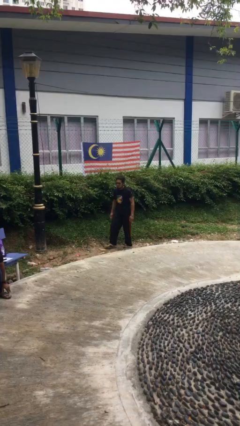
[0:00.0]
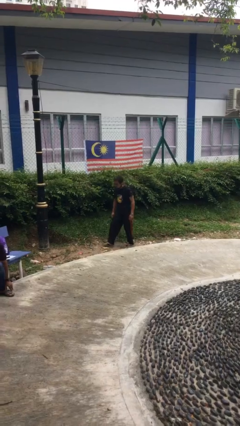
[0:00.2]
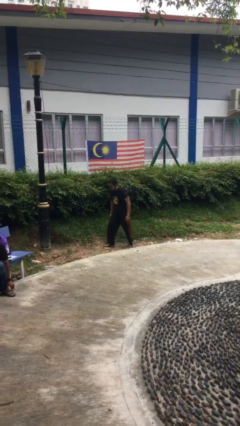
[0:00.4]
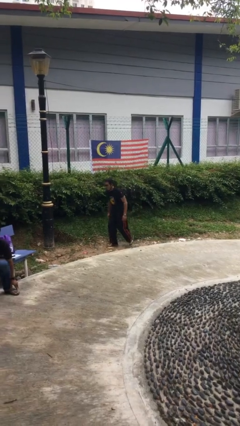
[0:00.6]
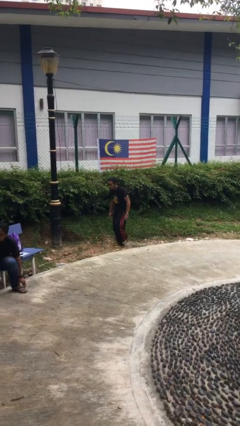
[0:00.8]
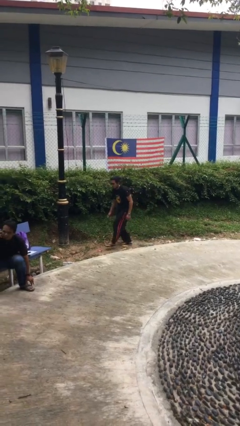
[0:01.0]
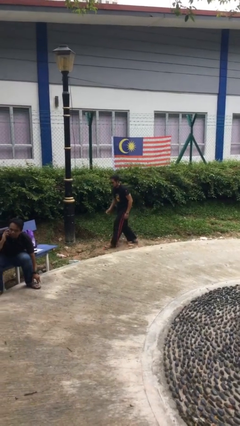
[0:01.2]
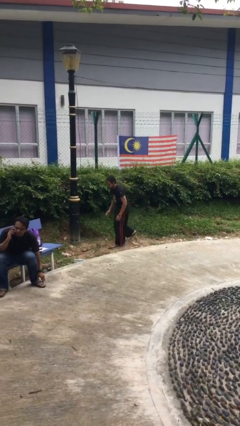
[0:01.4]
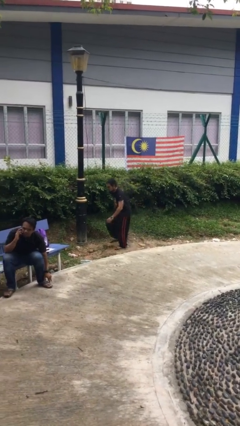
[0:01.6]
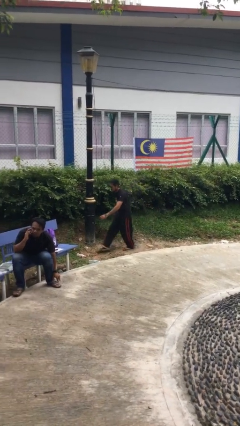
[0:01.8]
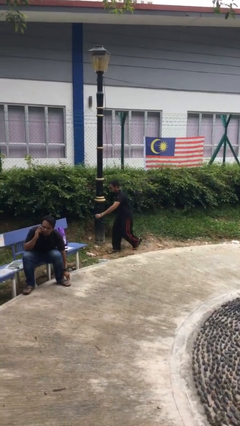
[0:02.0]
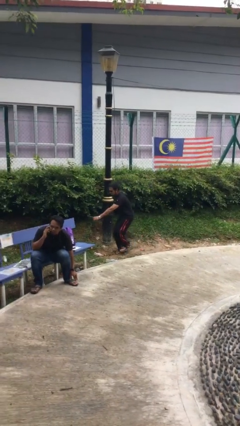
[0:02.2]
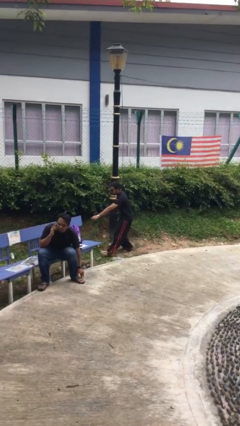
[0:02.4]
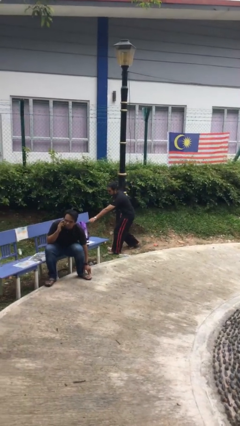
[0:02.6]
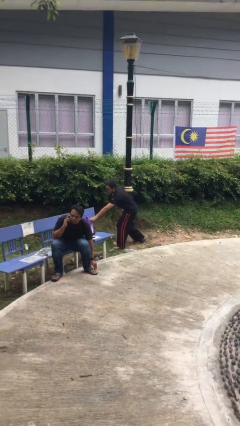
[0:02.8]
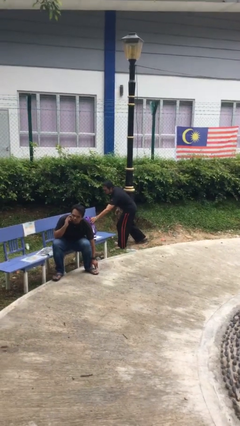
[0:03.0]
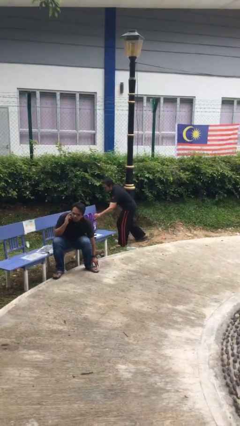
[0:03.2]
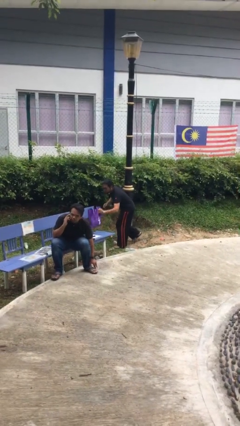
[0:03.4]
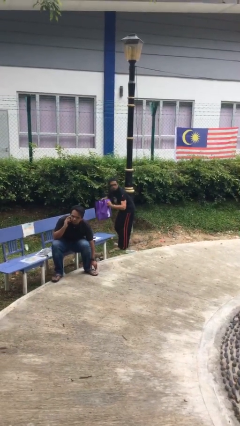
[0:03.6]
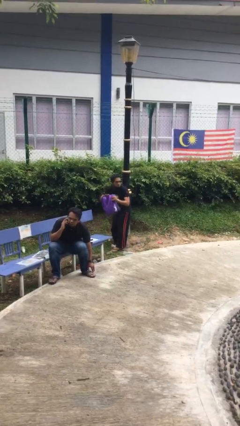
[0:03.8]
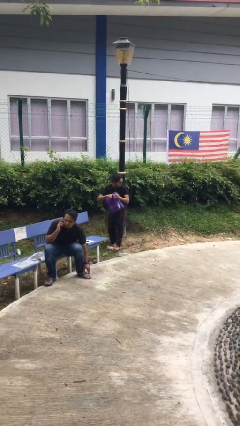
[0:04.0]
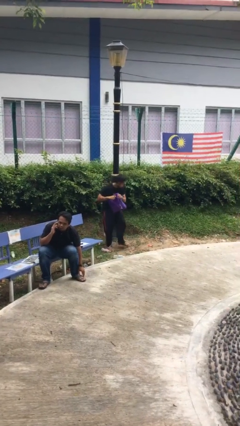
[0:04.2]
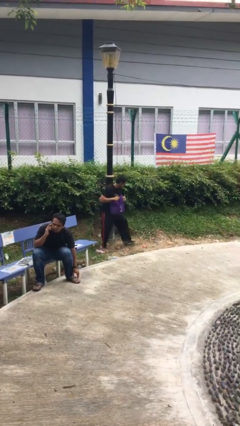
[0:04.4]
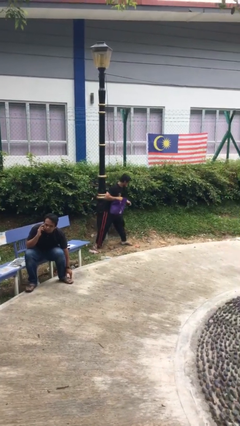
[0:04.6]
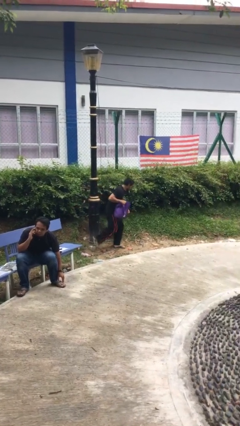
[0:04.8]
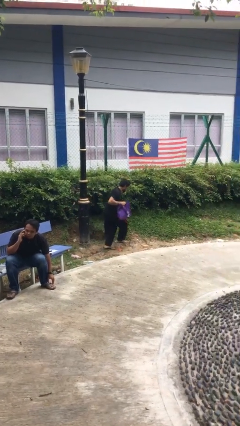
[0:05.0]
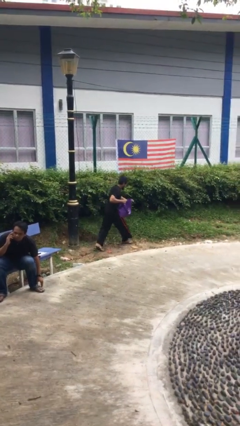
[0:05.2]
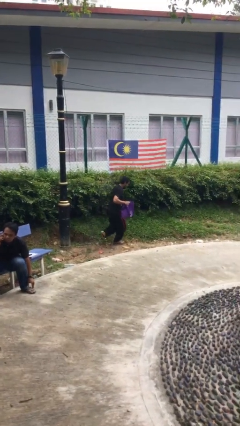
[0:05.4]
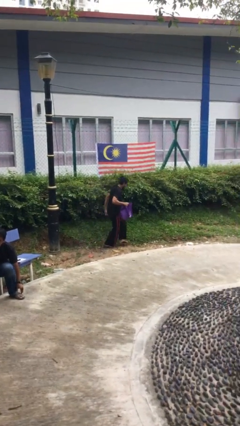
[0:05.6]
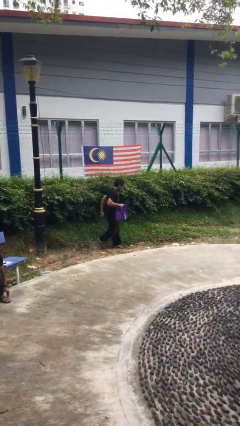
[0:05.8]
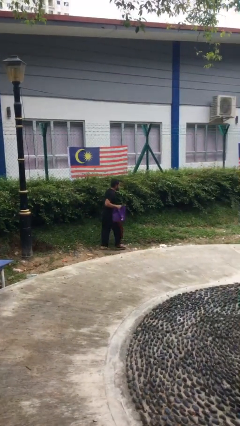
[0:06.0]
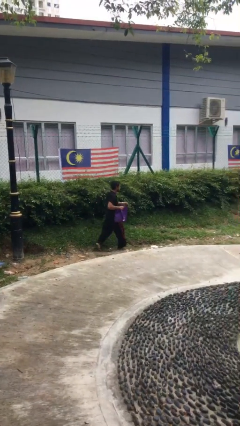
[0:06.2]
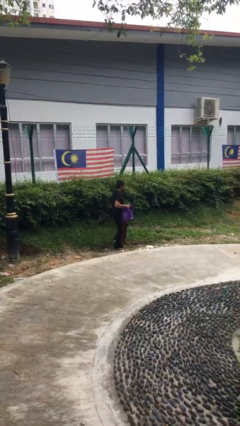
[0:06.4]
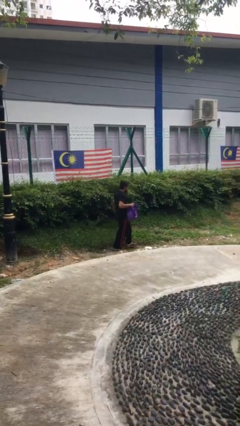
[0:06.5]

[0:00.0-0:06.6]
person steals object from person

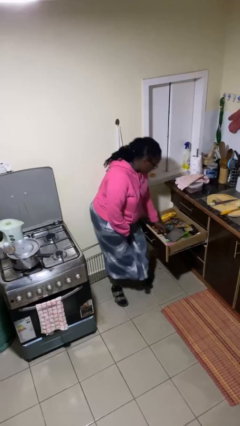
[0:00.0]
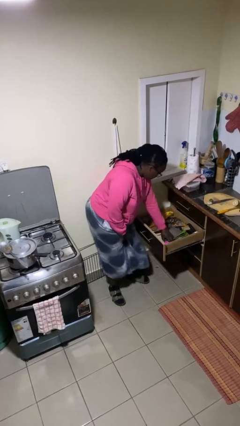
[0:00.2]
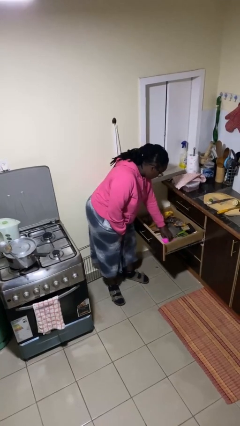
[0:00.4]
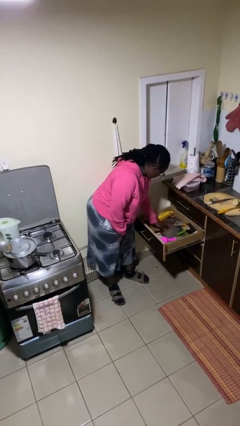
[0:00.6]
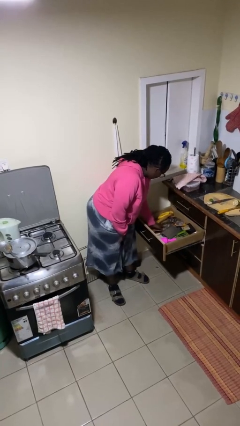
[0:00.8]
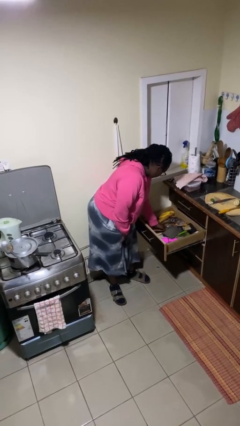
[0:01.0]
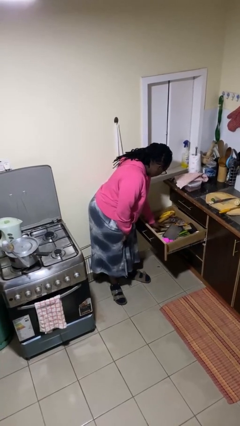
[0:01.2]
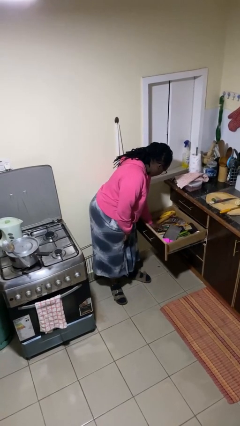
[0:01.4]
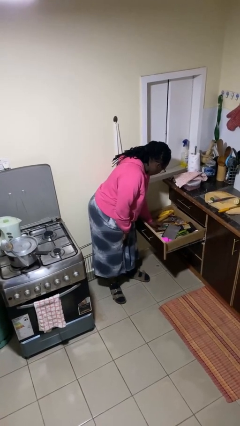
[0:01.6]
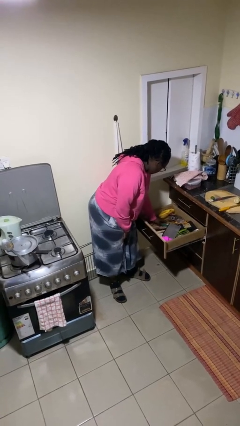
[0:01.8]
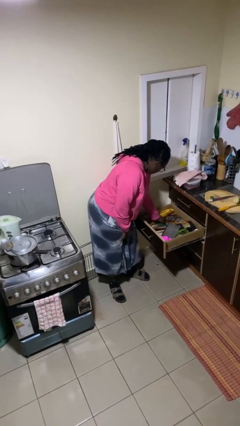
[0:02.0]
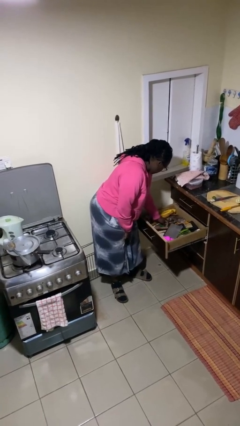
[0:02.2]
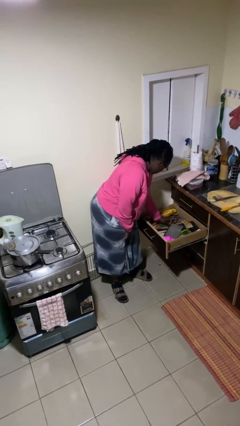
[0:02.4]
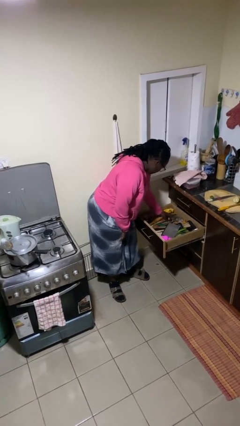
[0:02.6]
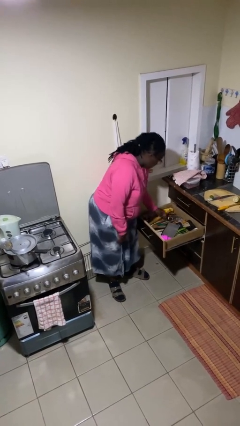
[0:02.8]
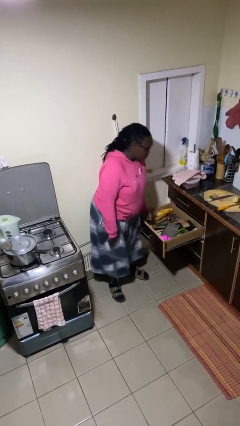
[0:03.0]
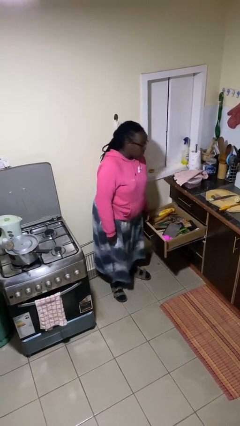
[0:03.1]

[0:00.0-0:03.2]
person searches in kitchen drawer

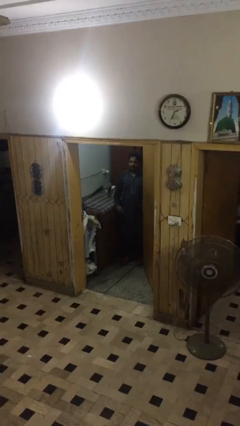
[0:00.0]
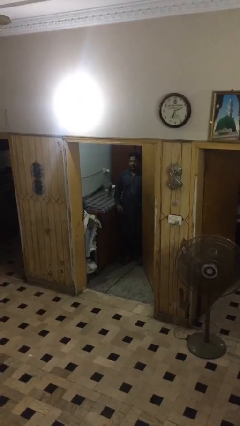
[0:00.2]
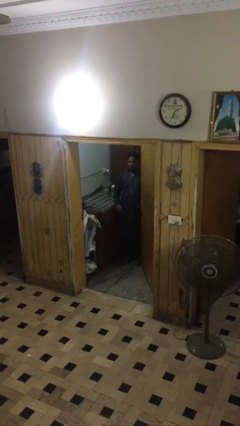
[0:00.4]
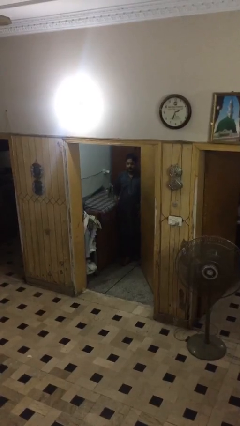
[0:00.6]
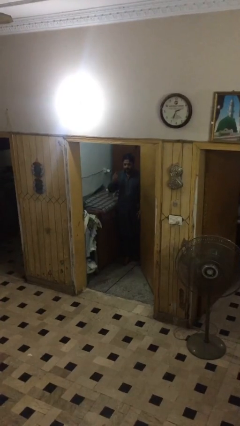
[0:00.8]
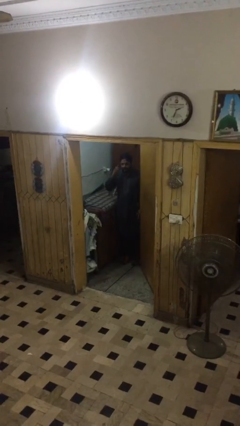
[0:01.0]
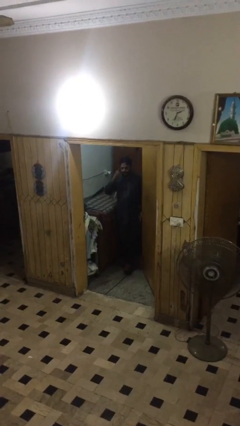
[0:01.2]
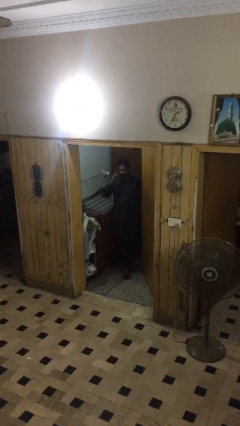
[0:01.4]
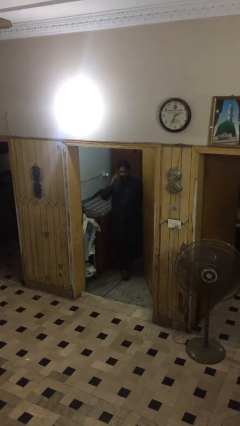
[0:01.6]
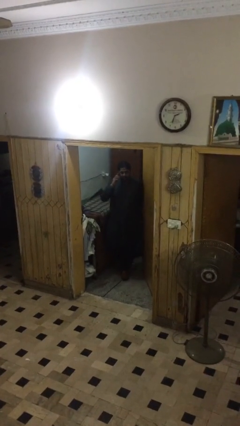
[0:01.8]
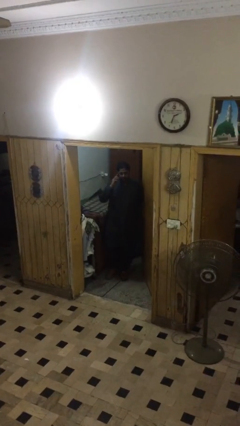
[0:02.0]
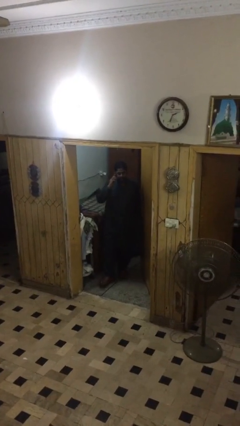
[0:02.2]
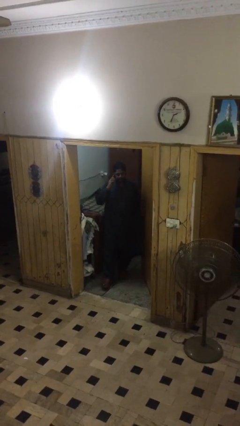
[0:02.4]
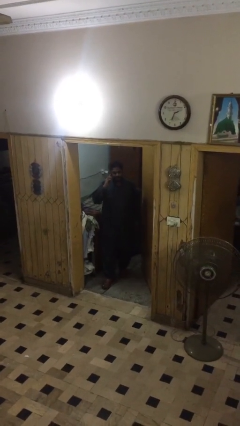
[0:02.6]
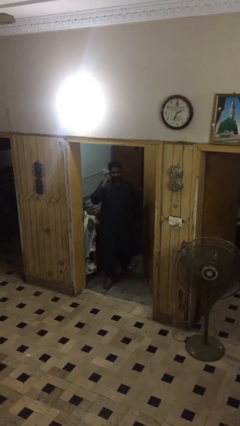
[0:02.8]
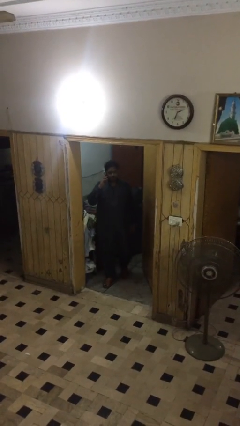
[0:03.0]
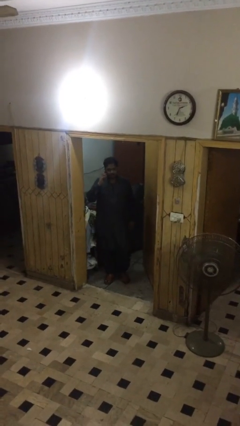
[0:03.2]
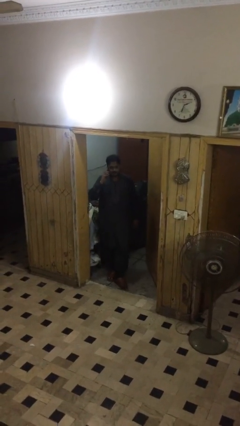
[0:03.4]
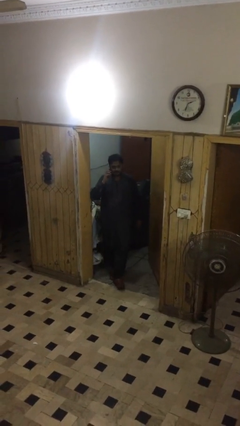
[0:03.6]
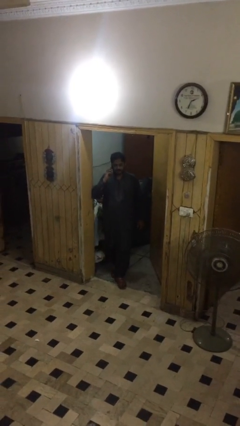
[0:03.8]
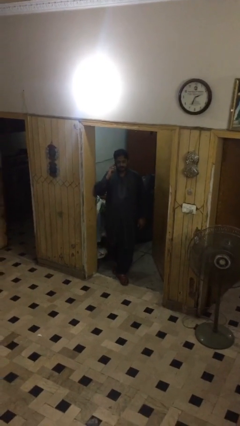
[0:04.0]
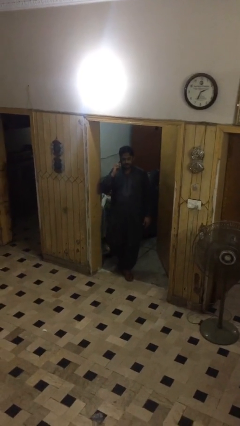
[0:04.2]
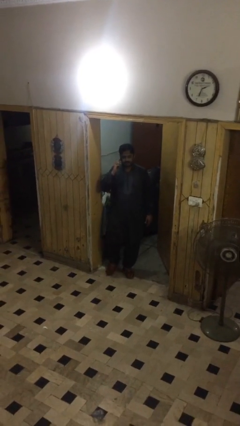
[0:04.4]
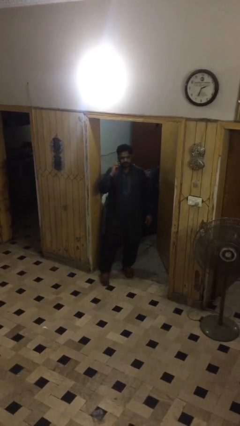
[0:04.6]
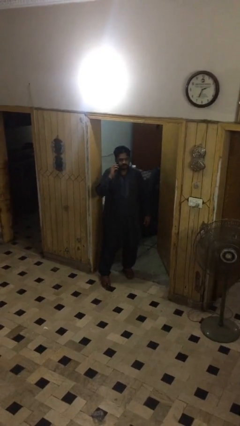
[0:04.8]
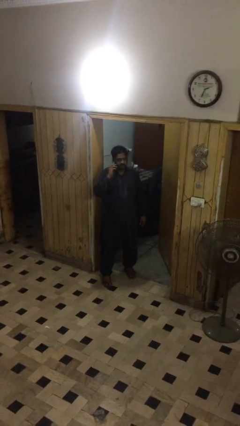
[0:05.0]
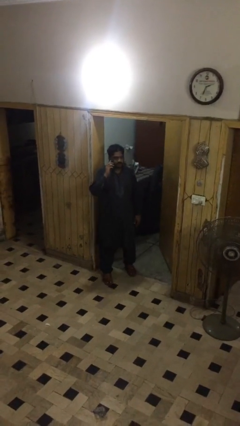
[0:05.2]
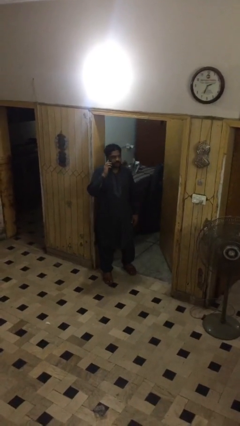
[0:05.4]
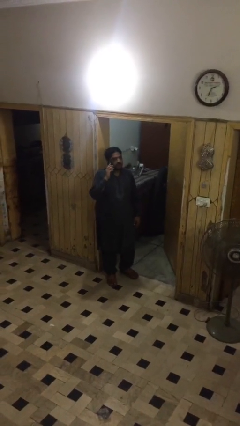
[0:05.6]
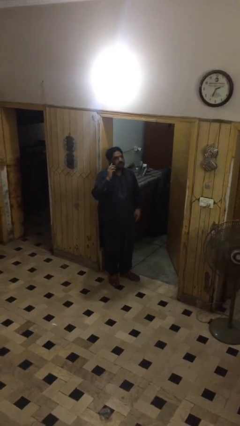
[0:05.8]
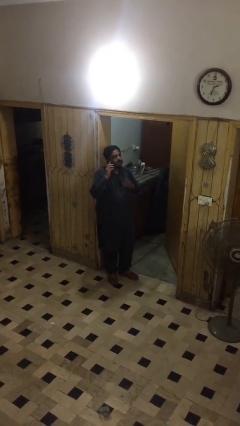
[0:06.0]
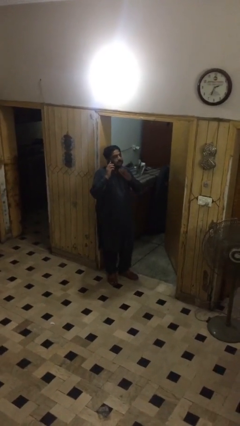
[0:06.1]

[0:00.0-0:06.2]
person enters scene through structure

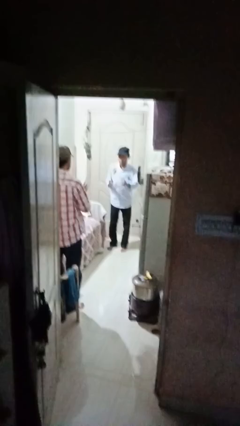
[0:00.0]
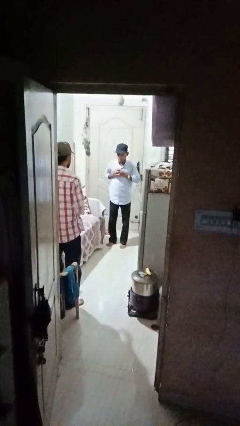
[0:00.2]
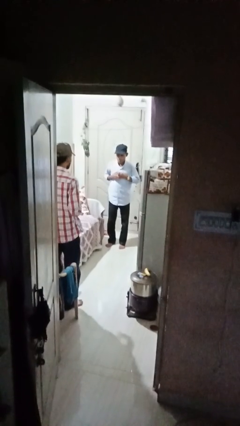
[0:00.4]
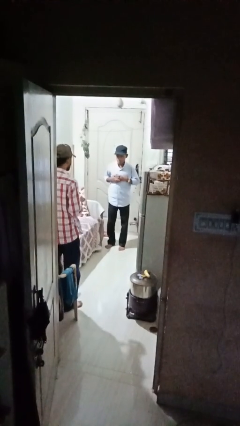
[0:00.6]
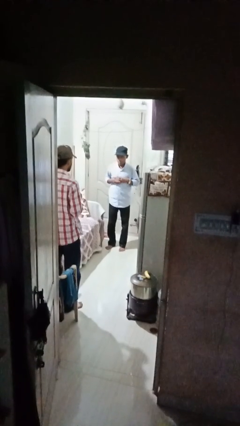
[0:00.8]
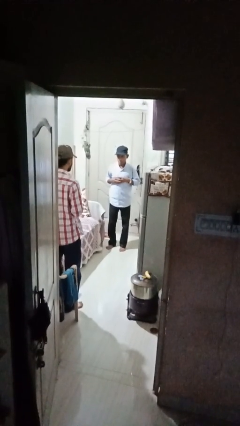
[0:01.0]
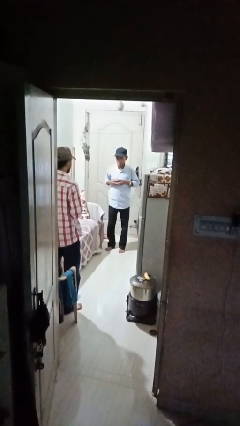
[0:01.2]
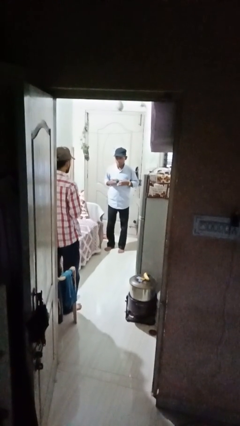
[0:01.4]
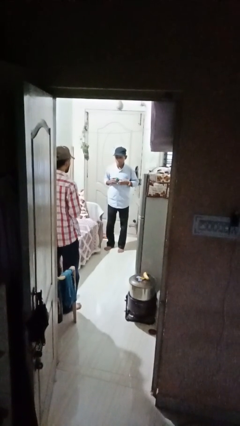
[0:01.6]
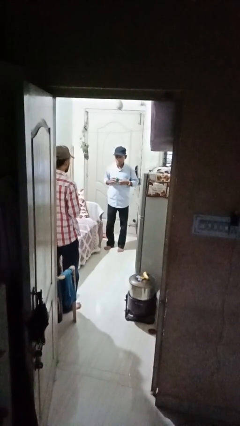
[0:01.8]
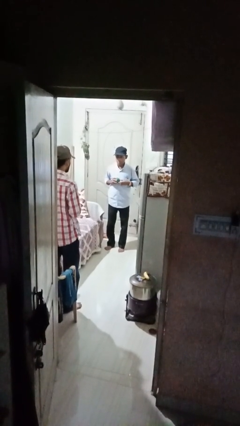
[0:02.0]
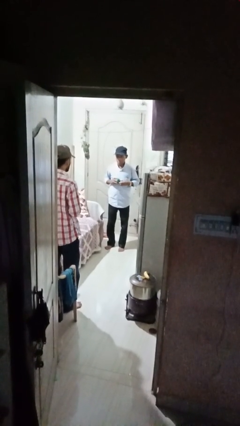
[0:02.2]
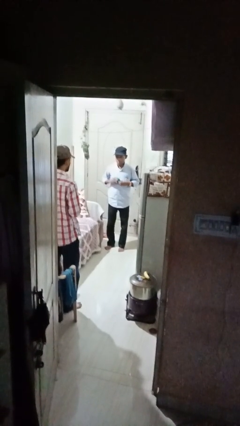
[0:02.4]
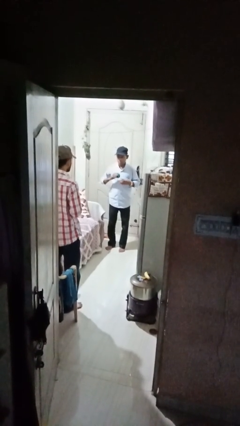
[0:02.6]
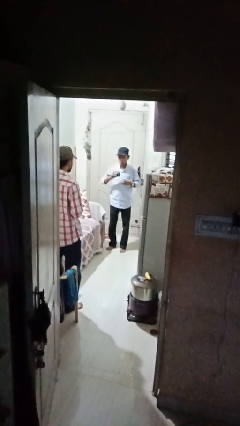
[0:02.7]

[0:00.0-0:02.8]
person catches object from person
